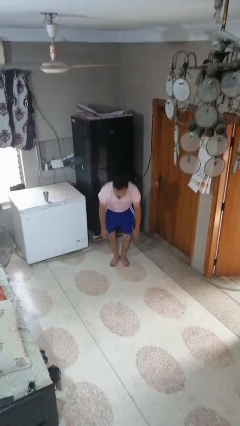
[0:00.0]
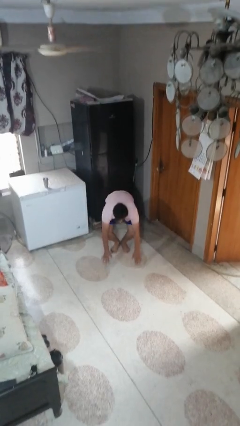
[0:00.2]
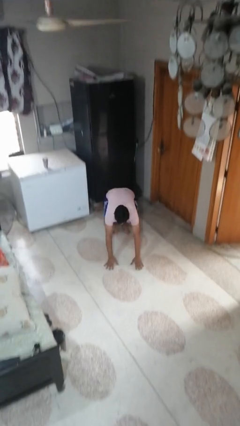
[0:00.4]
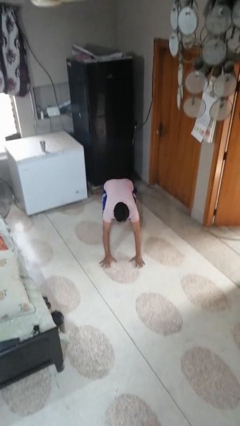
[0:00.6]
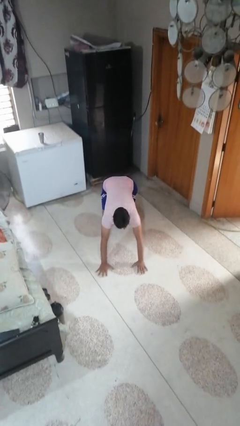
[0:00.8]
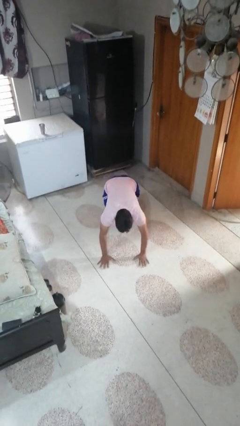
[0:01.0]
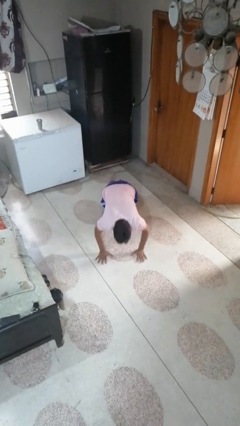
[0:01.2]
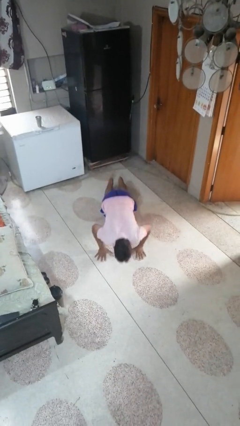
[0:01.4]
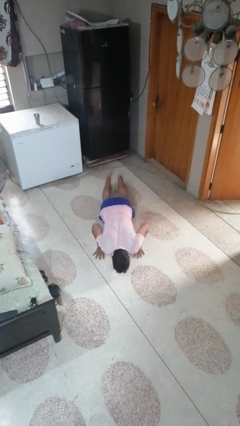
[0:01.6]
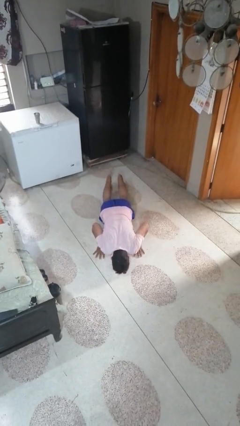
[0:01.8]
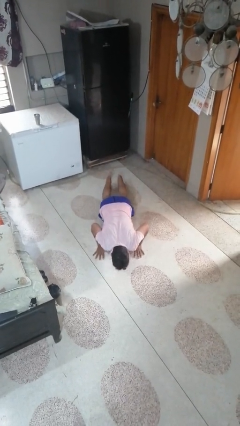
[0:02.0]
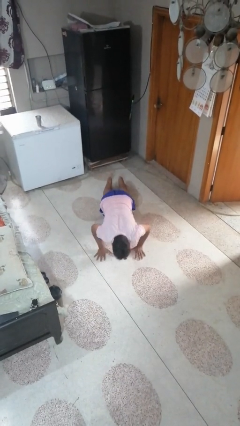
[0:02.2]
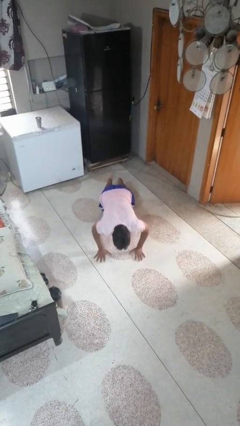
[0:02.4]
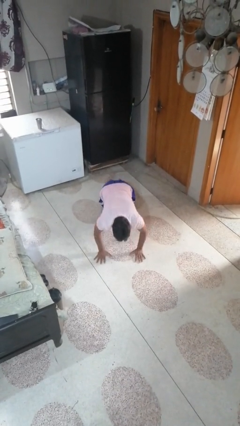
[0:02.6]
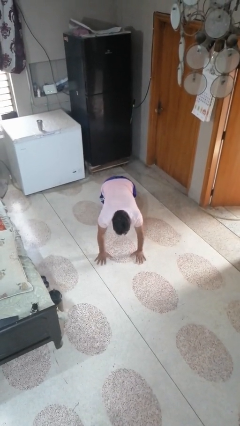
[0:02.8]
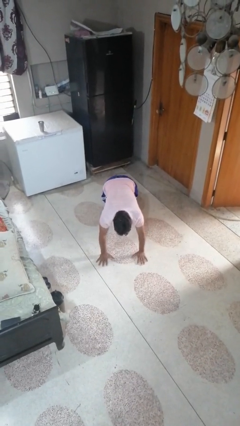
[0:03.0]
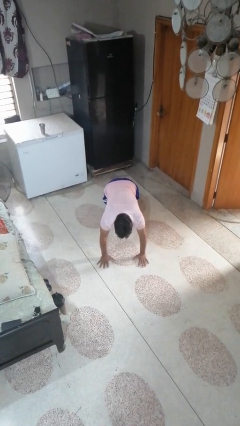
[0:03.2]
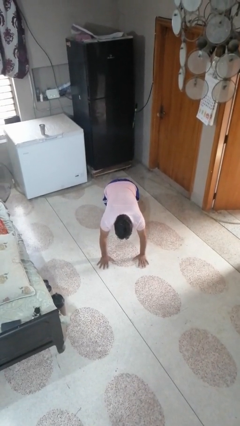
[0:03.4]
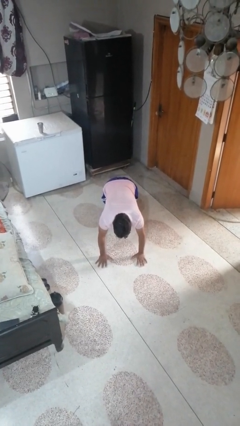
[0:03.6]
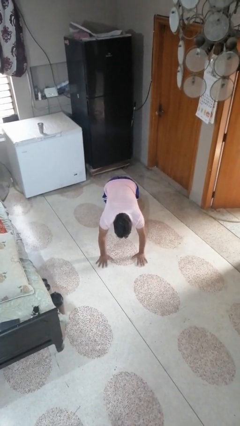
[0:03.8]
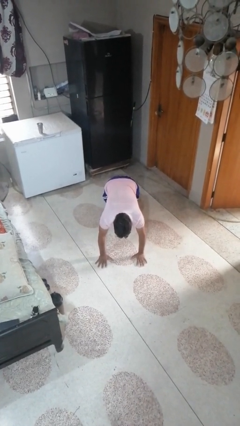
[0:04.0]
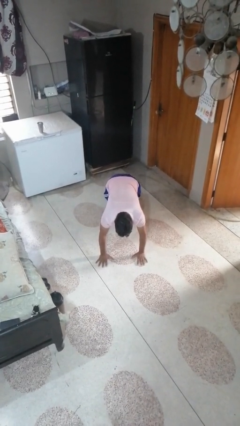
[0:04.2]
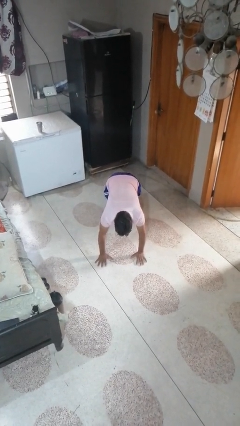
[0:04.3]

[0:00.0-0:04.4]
person exercises with pushup

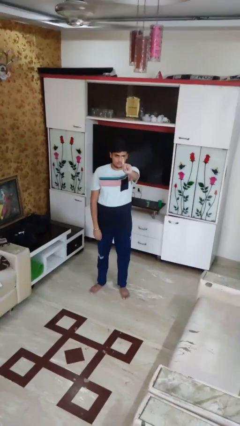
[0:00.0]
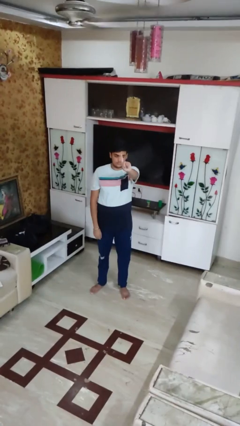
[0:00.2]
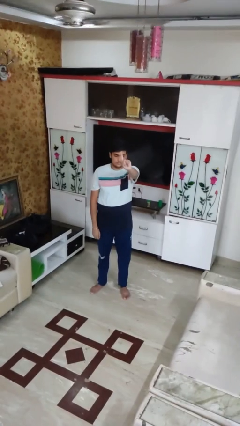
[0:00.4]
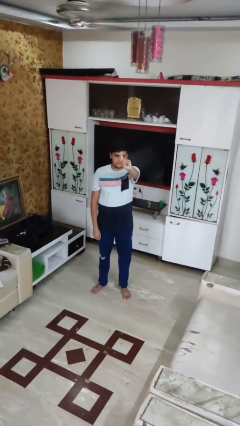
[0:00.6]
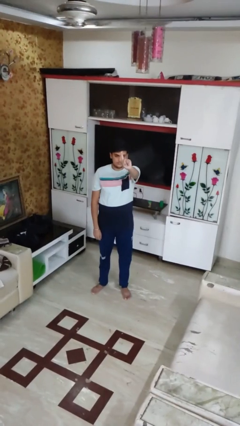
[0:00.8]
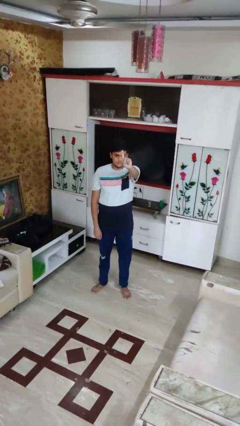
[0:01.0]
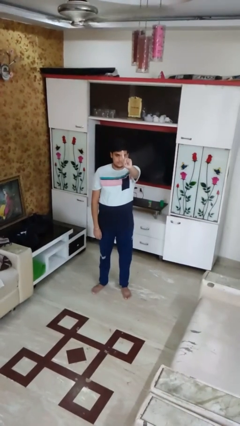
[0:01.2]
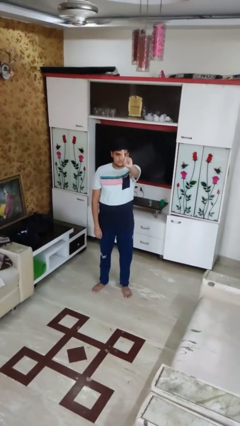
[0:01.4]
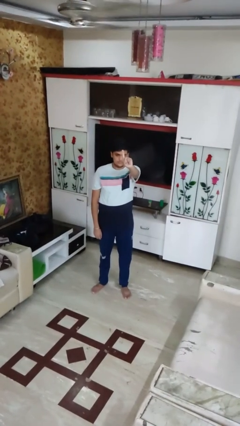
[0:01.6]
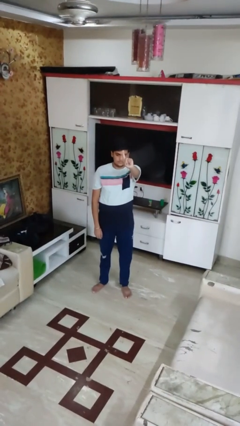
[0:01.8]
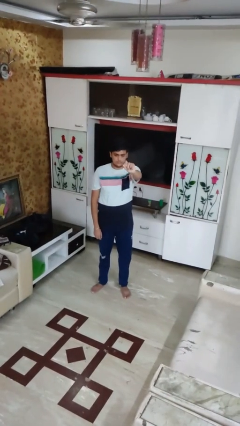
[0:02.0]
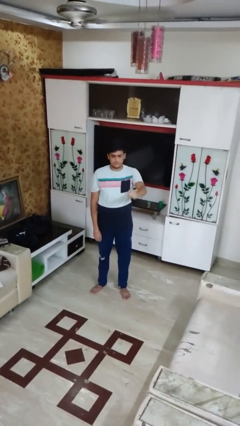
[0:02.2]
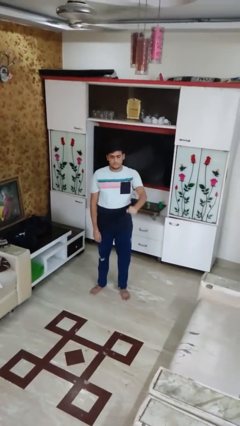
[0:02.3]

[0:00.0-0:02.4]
person gestures number one

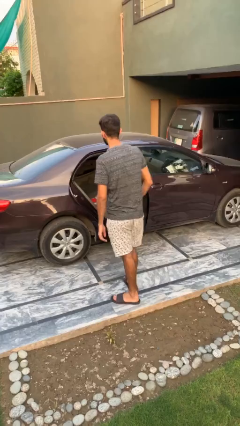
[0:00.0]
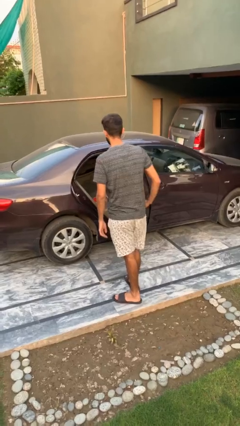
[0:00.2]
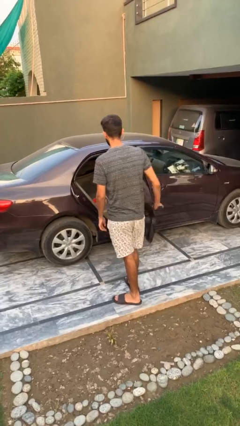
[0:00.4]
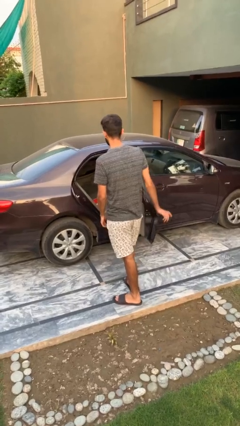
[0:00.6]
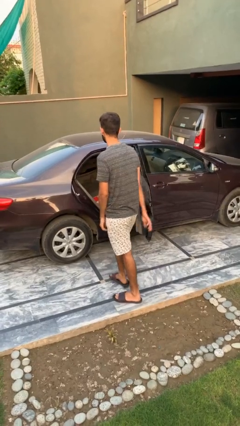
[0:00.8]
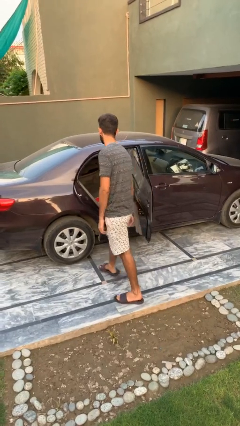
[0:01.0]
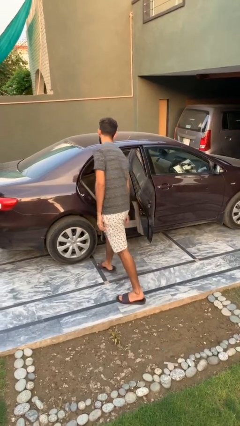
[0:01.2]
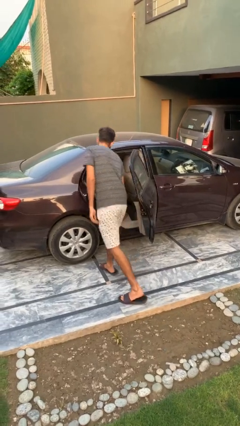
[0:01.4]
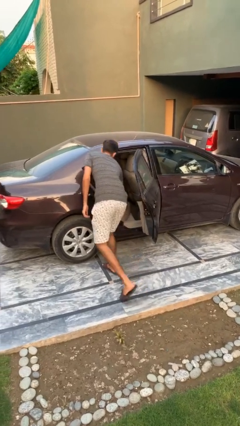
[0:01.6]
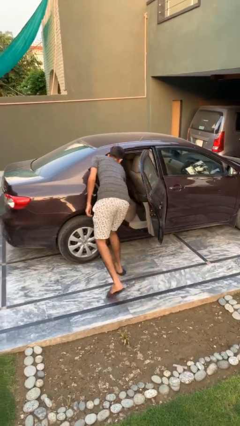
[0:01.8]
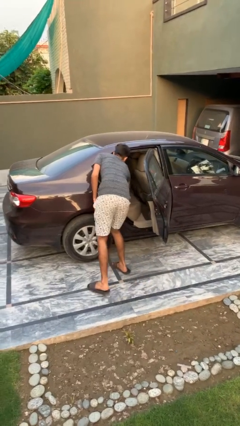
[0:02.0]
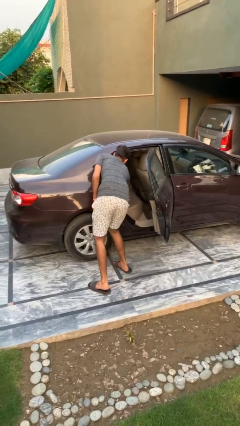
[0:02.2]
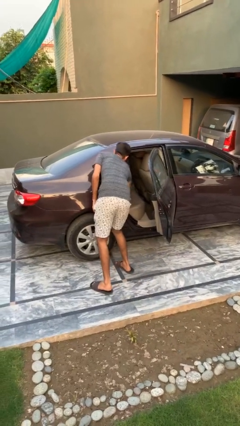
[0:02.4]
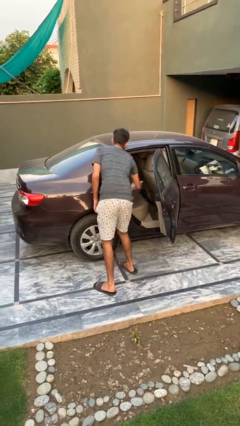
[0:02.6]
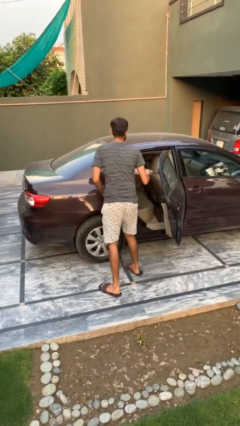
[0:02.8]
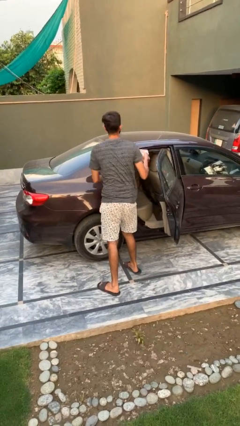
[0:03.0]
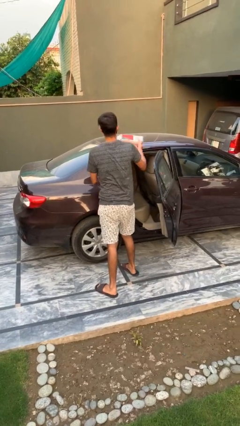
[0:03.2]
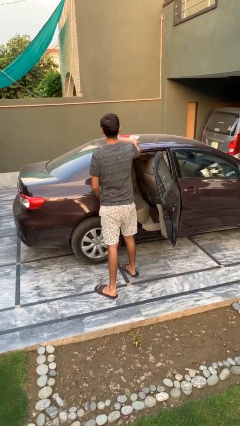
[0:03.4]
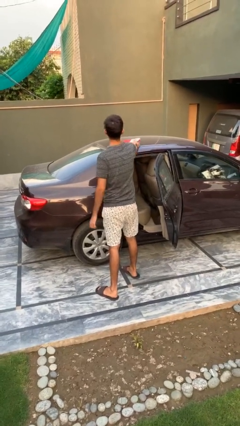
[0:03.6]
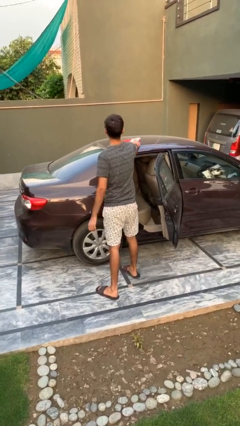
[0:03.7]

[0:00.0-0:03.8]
person unloads car

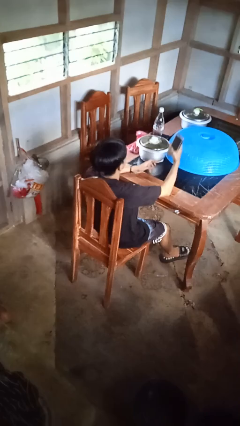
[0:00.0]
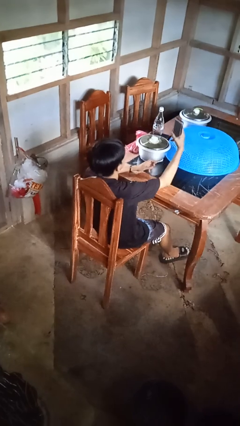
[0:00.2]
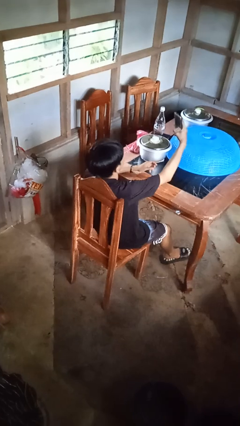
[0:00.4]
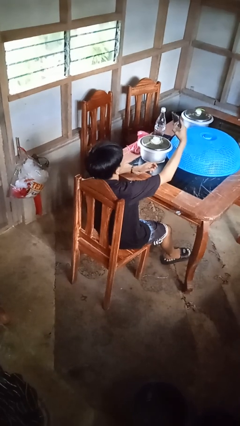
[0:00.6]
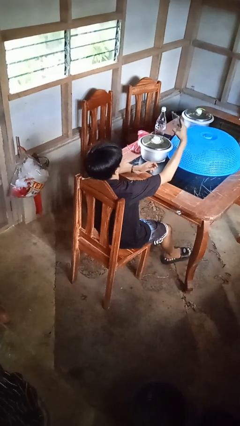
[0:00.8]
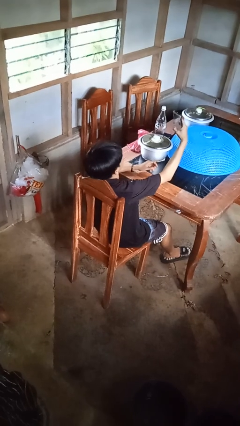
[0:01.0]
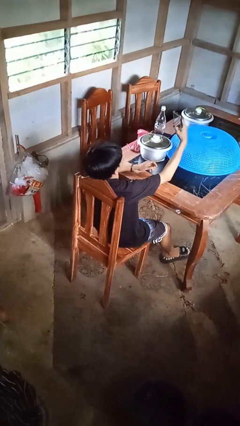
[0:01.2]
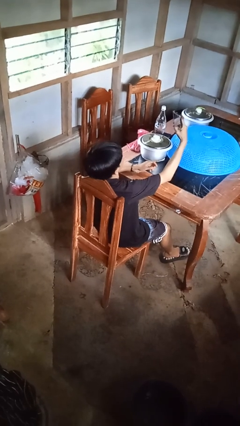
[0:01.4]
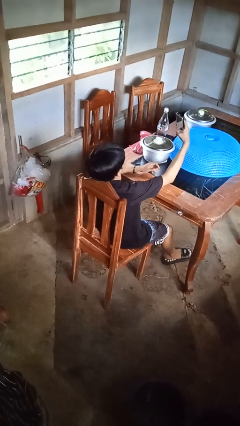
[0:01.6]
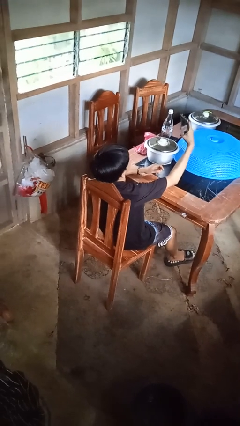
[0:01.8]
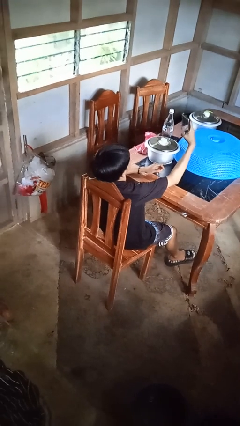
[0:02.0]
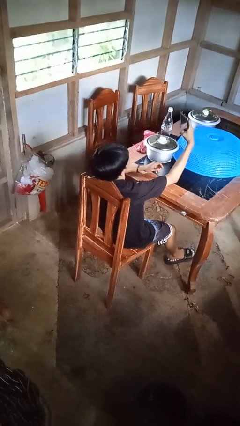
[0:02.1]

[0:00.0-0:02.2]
person takes selfie

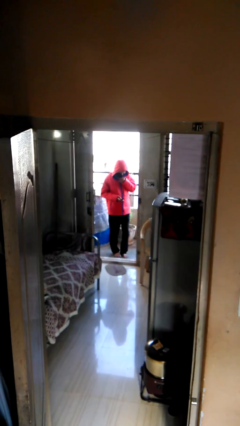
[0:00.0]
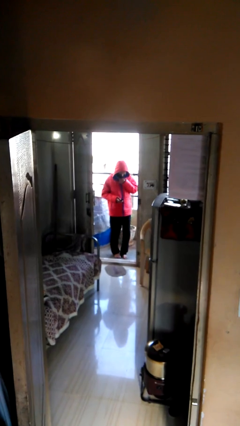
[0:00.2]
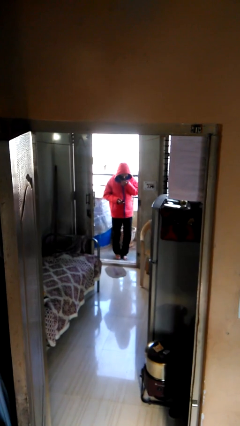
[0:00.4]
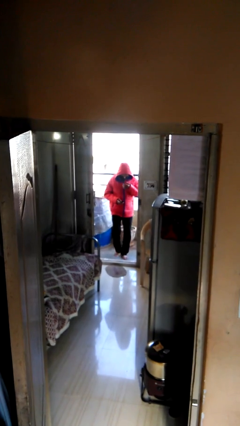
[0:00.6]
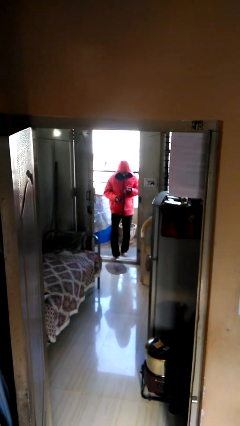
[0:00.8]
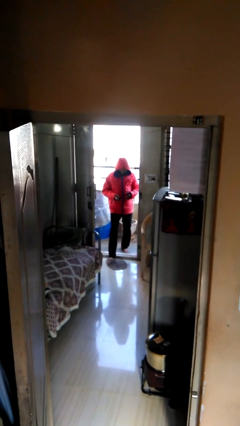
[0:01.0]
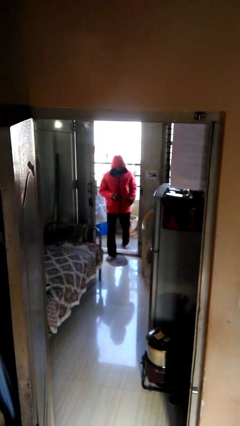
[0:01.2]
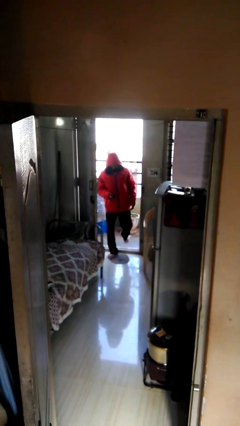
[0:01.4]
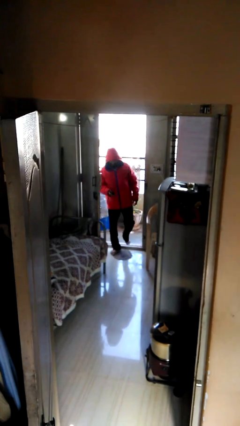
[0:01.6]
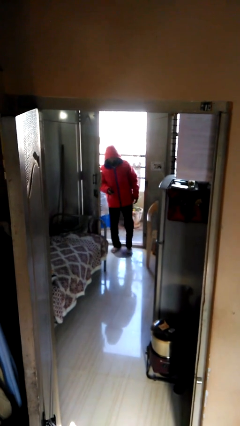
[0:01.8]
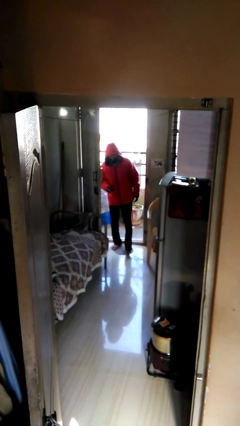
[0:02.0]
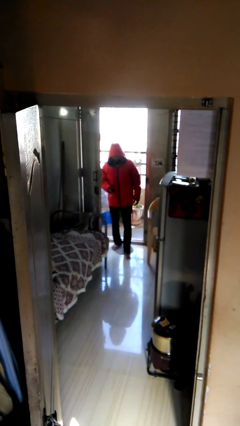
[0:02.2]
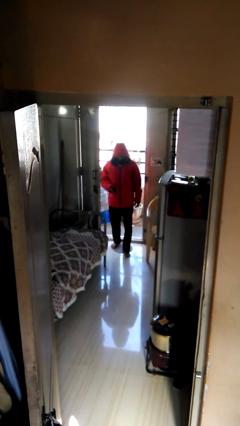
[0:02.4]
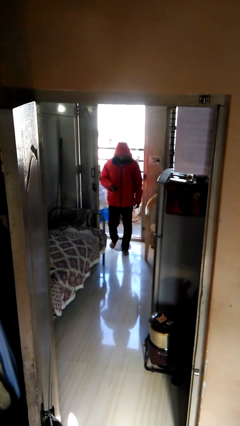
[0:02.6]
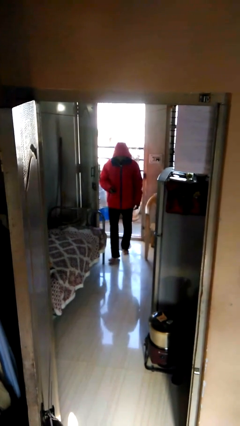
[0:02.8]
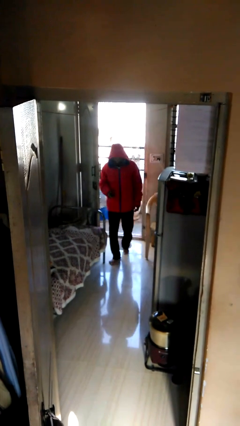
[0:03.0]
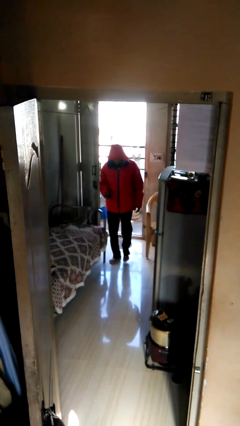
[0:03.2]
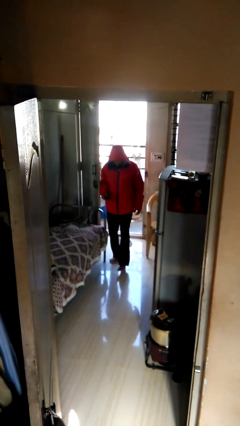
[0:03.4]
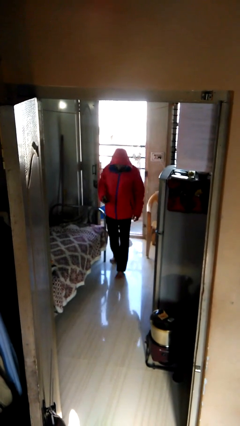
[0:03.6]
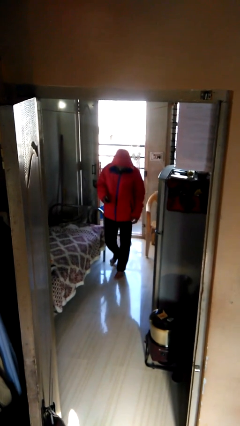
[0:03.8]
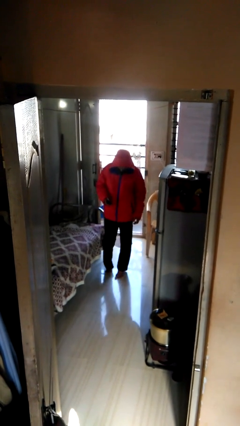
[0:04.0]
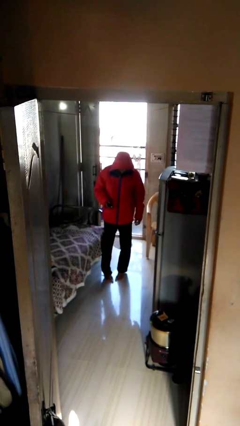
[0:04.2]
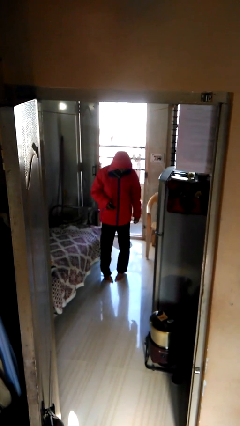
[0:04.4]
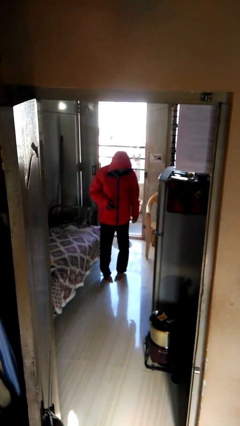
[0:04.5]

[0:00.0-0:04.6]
person enters scene through structure

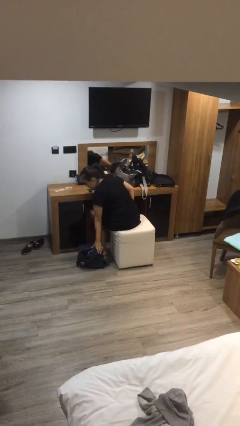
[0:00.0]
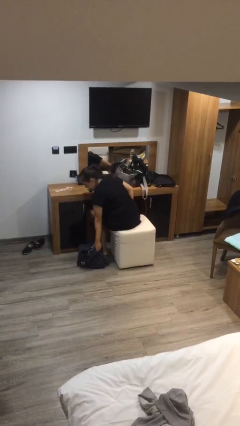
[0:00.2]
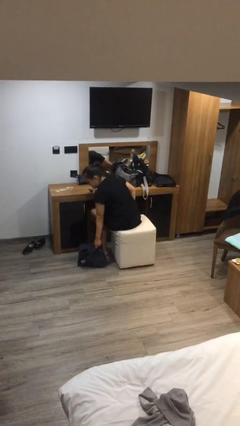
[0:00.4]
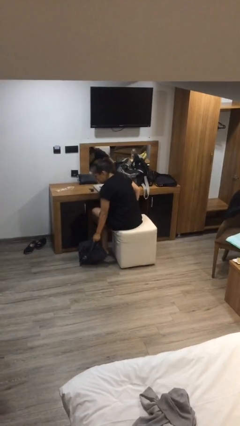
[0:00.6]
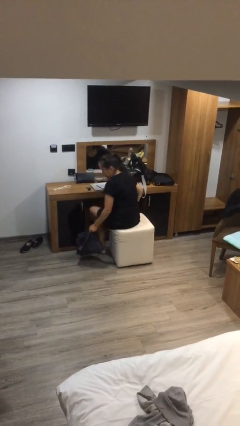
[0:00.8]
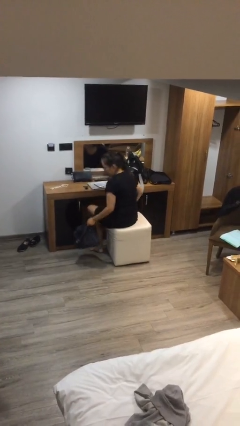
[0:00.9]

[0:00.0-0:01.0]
person picks up object from floor
